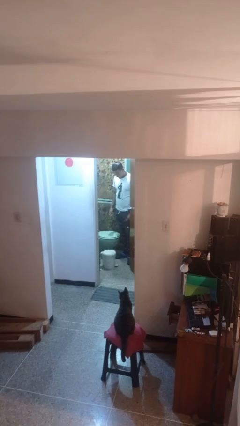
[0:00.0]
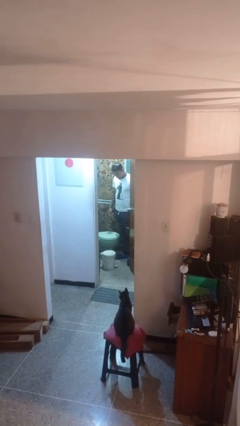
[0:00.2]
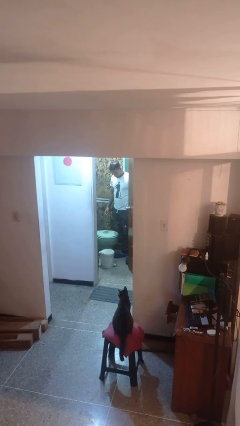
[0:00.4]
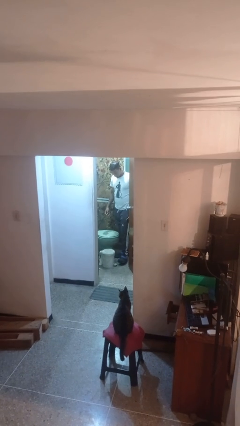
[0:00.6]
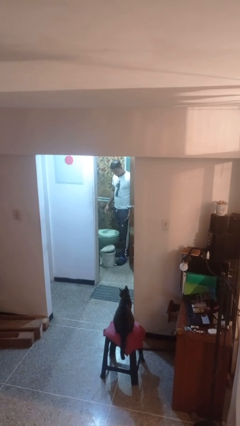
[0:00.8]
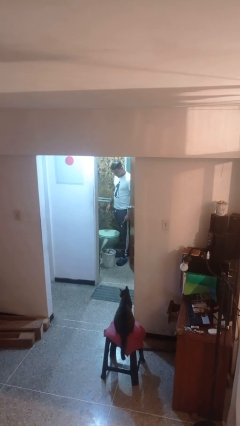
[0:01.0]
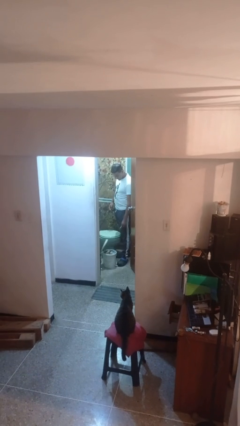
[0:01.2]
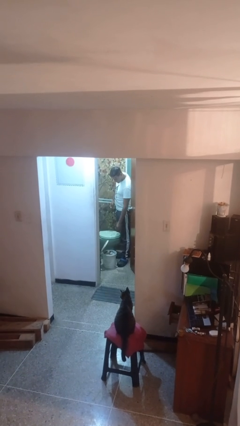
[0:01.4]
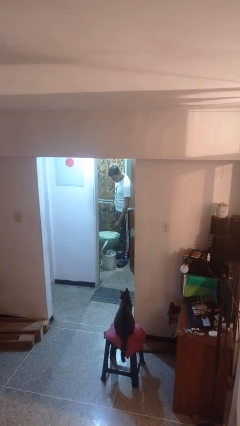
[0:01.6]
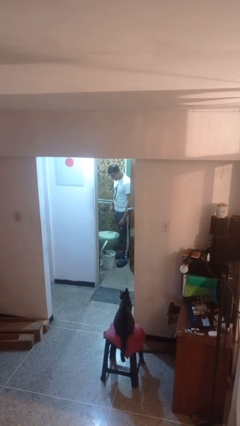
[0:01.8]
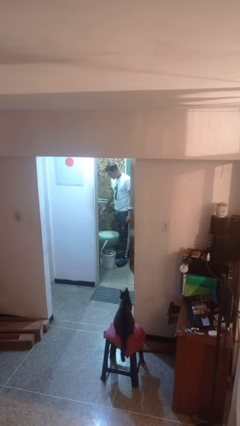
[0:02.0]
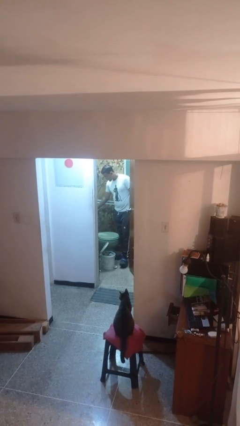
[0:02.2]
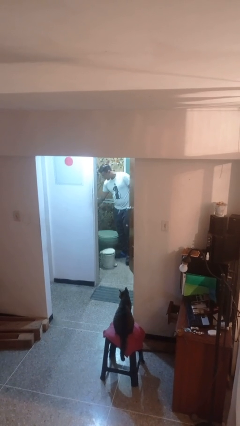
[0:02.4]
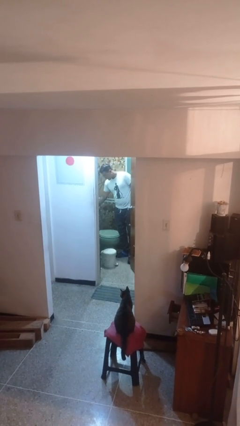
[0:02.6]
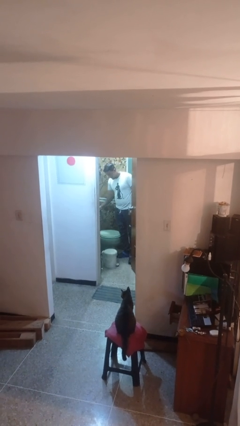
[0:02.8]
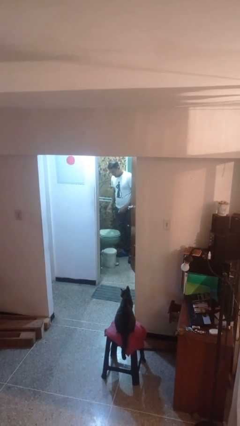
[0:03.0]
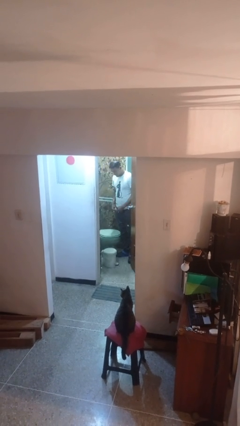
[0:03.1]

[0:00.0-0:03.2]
person discards trash

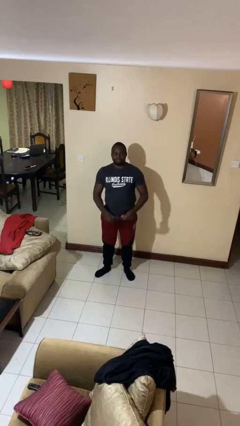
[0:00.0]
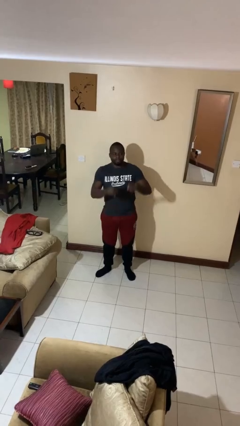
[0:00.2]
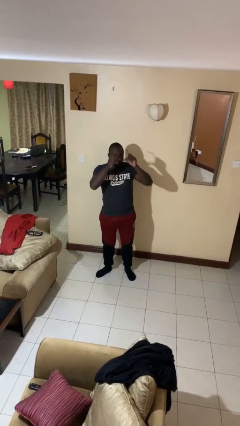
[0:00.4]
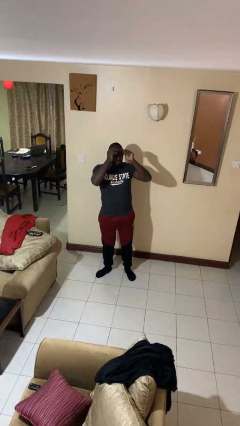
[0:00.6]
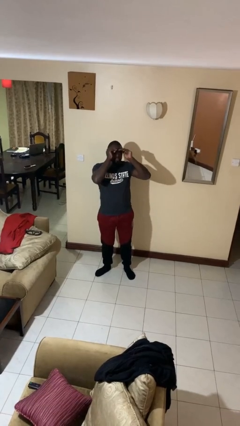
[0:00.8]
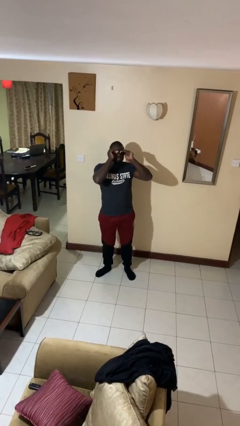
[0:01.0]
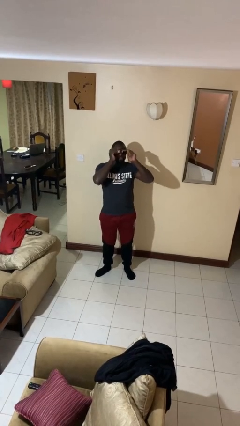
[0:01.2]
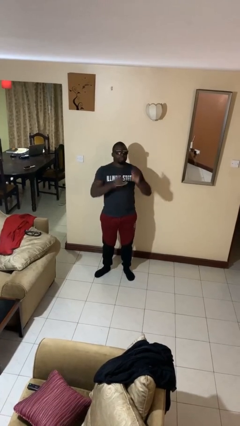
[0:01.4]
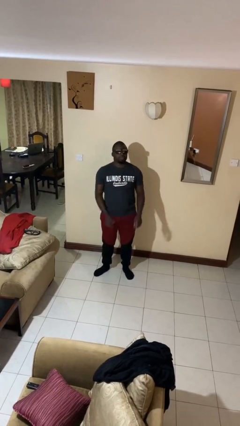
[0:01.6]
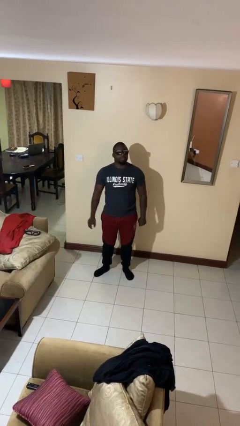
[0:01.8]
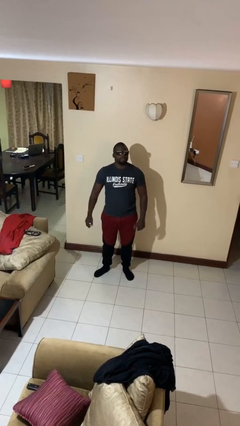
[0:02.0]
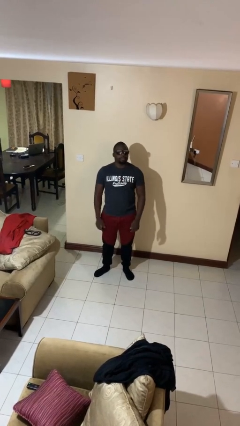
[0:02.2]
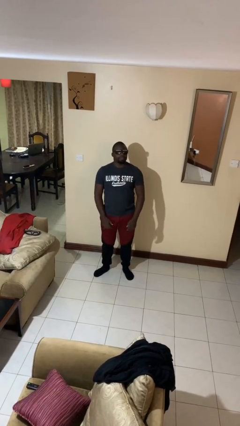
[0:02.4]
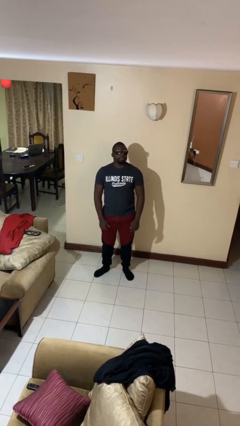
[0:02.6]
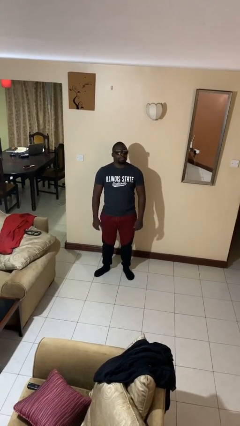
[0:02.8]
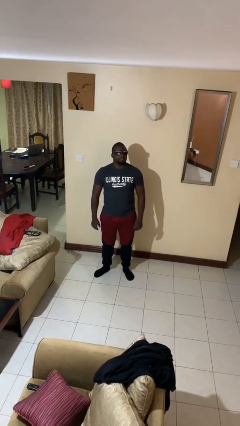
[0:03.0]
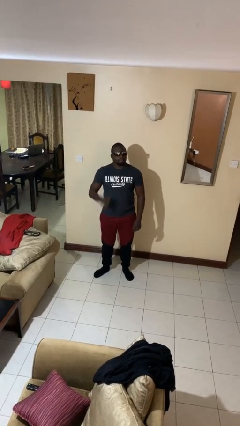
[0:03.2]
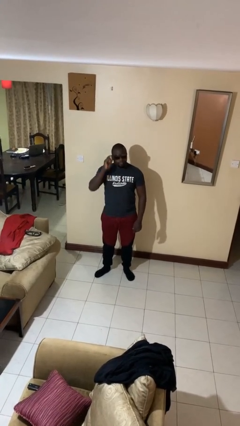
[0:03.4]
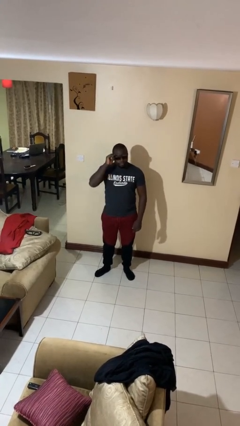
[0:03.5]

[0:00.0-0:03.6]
person puts on sunglasses

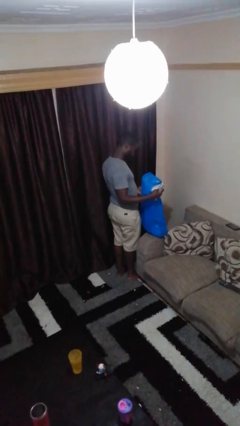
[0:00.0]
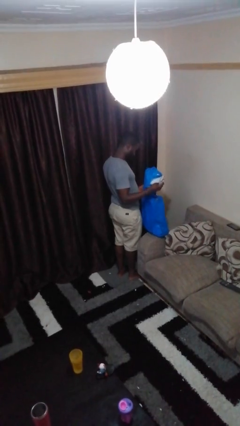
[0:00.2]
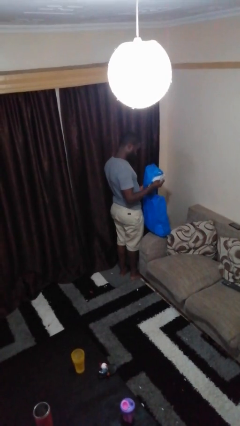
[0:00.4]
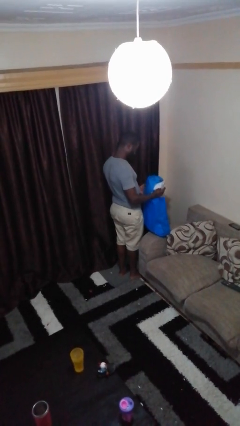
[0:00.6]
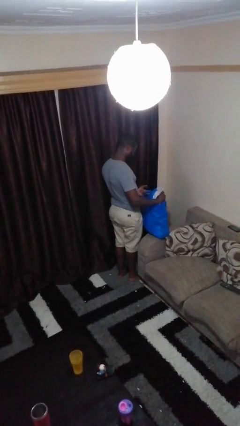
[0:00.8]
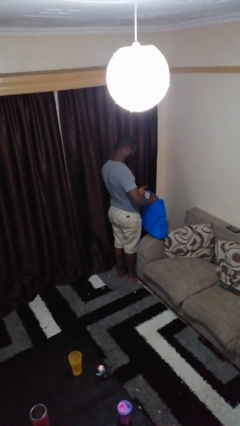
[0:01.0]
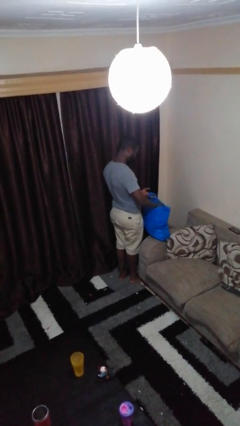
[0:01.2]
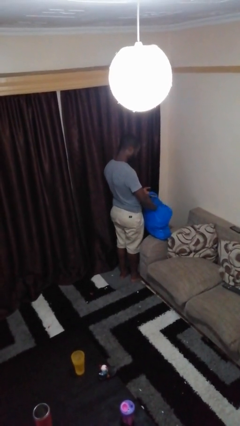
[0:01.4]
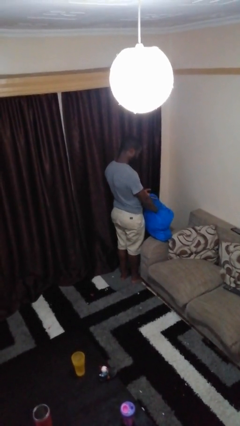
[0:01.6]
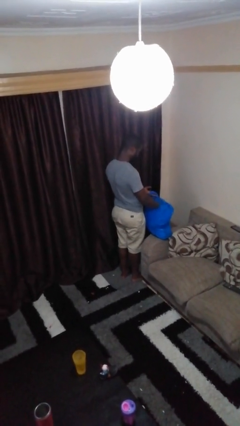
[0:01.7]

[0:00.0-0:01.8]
person puts object into bag

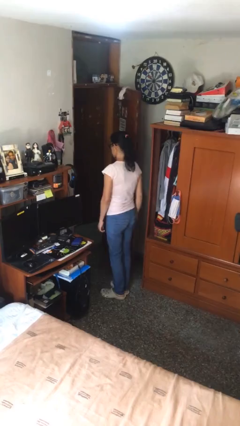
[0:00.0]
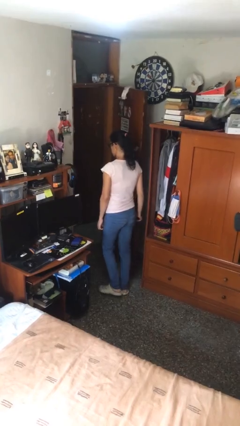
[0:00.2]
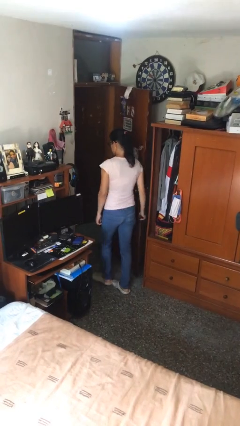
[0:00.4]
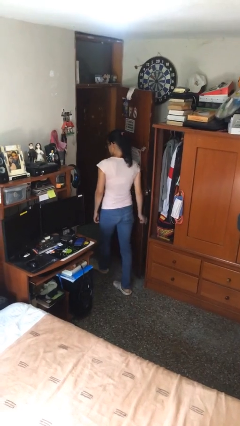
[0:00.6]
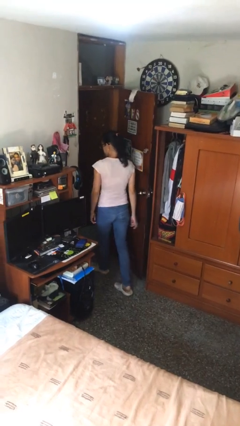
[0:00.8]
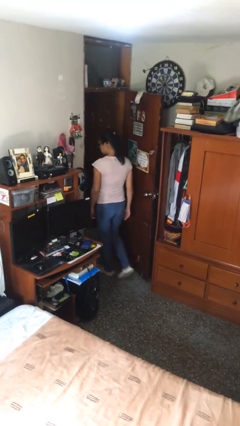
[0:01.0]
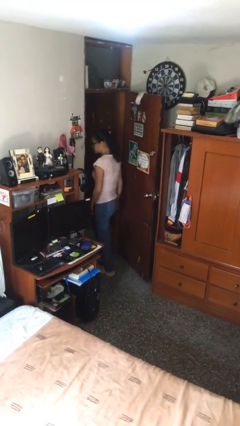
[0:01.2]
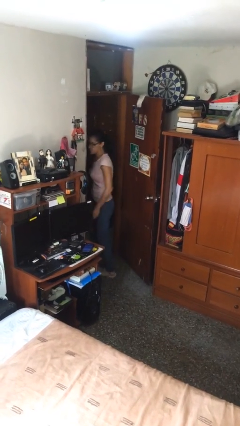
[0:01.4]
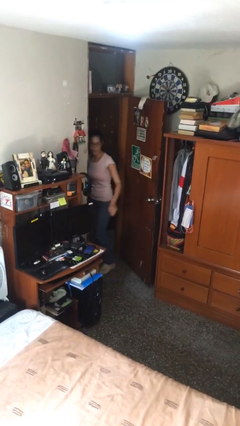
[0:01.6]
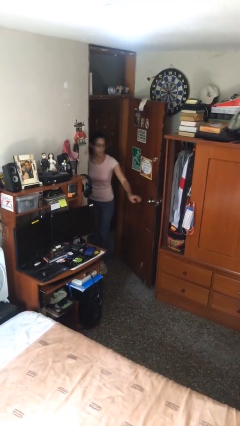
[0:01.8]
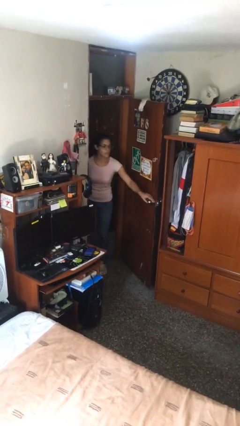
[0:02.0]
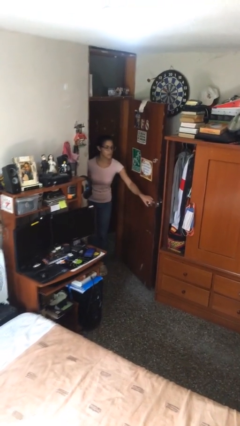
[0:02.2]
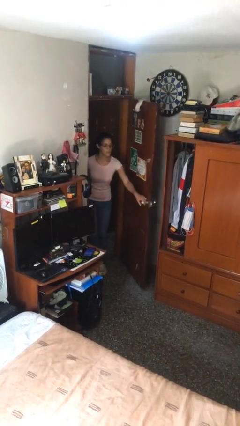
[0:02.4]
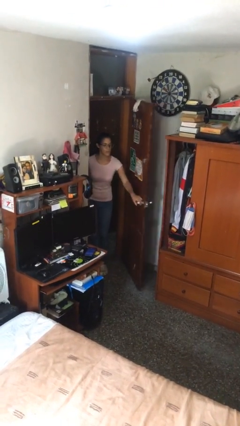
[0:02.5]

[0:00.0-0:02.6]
person exits scene through structure

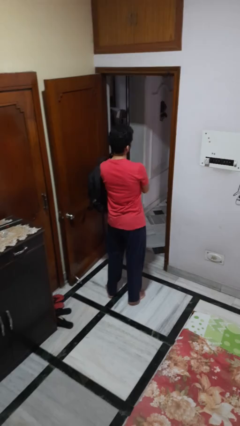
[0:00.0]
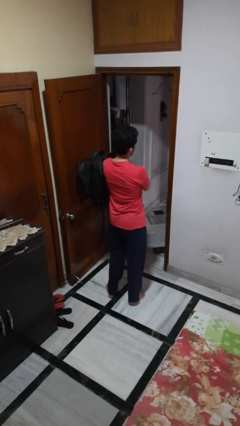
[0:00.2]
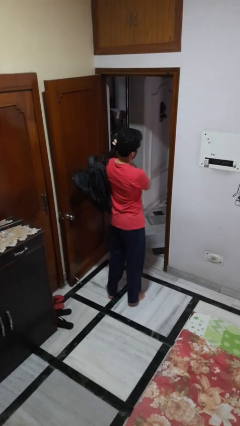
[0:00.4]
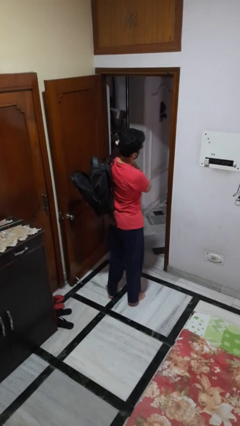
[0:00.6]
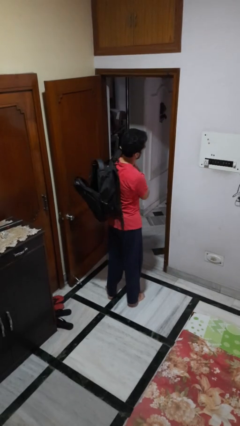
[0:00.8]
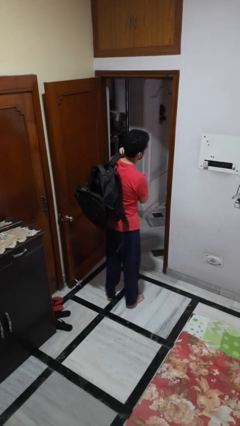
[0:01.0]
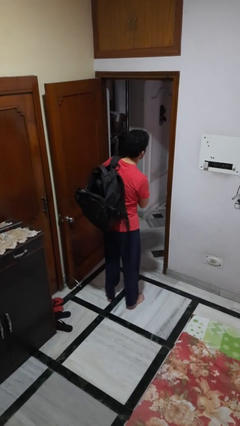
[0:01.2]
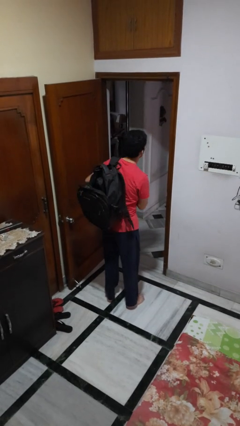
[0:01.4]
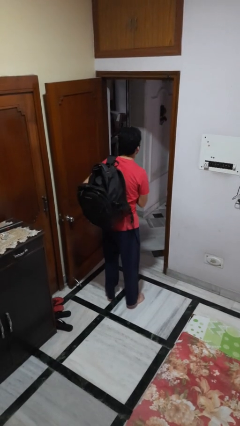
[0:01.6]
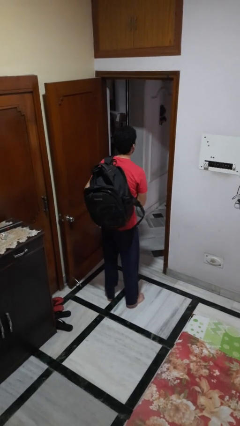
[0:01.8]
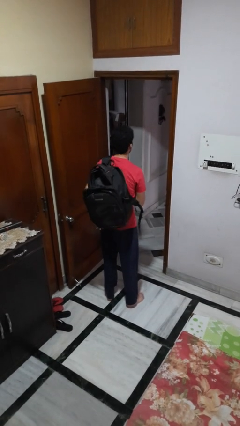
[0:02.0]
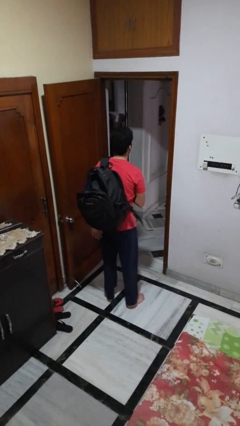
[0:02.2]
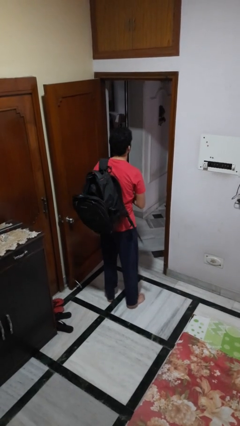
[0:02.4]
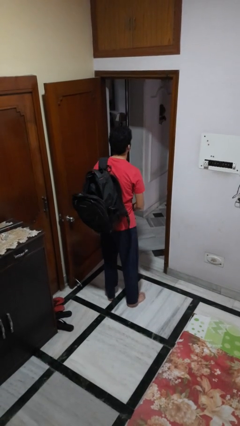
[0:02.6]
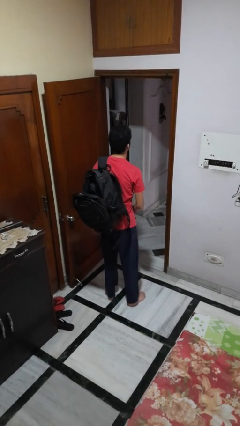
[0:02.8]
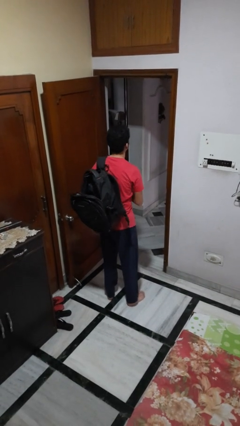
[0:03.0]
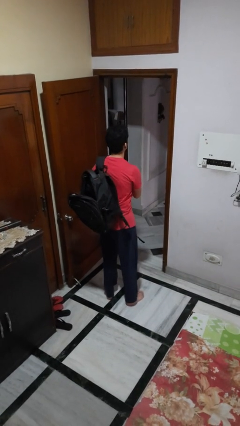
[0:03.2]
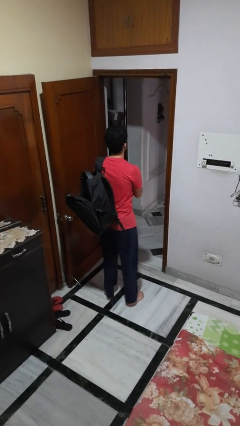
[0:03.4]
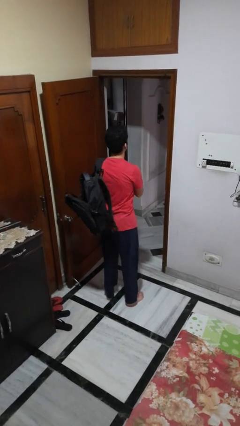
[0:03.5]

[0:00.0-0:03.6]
person puts on backpack

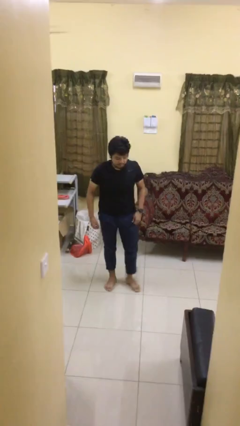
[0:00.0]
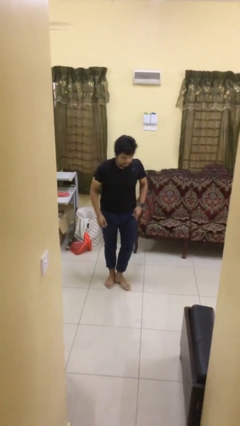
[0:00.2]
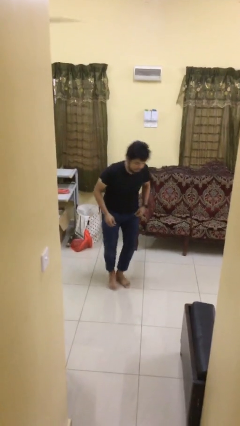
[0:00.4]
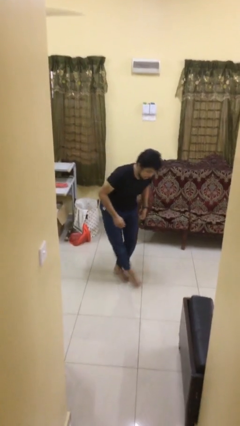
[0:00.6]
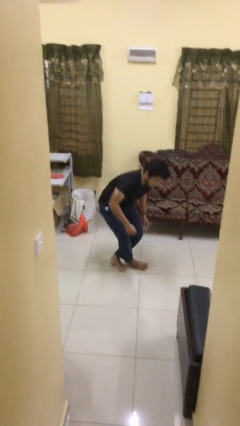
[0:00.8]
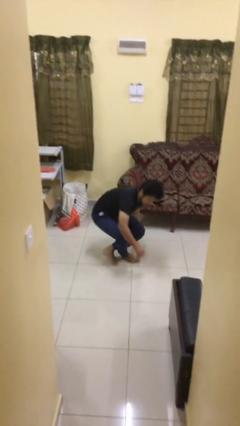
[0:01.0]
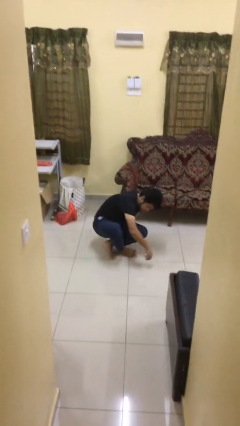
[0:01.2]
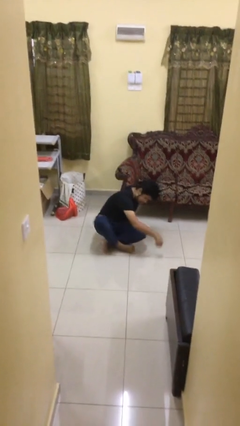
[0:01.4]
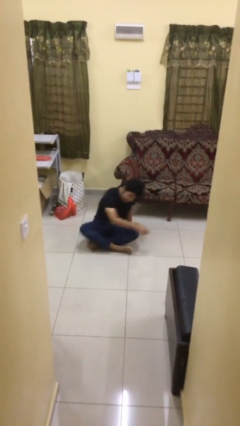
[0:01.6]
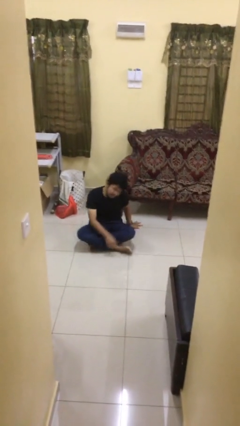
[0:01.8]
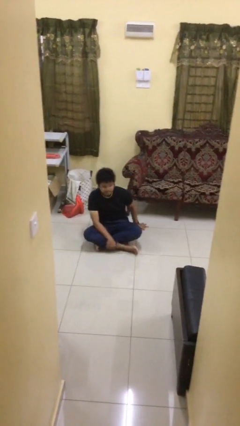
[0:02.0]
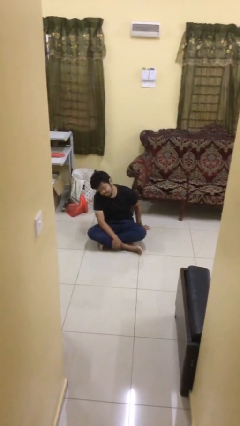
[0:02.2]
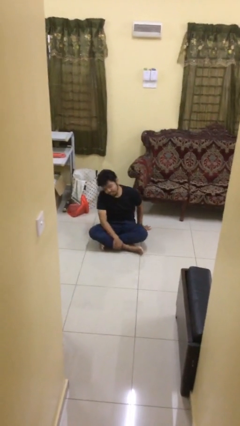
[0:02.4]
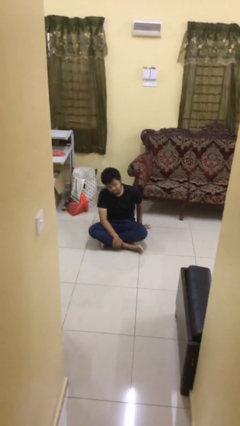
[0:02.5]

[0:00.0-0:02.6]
person sits crisscross
